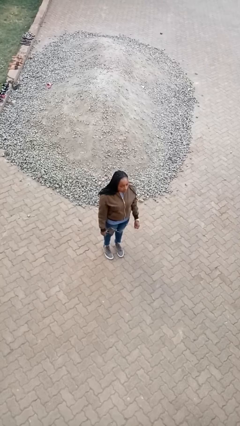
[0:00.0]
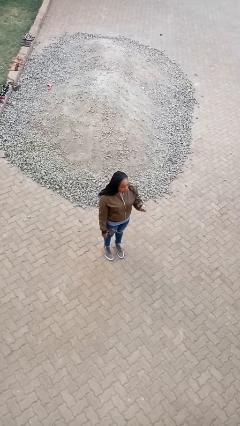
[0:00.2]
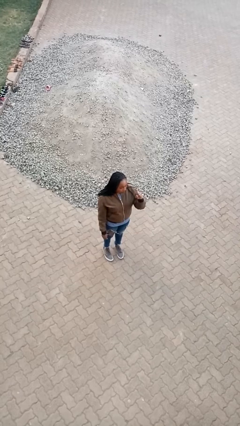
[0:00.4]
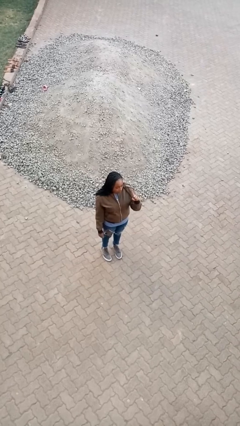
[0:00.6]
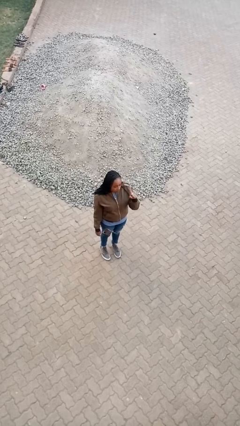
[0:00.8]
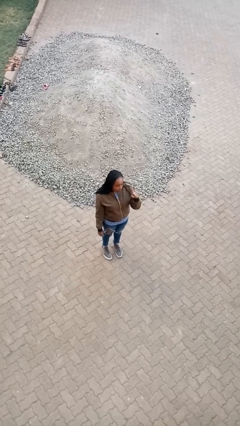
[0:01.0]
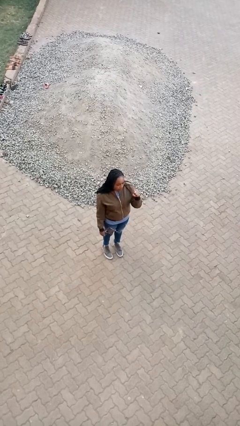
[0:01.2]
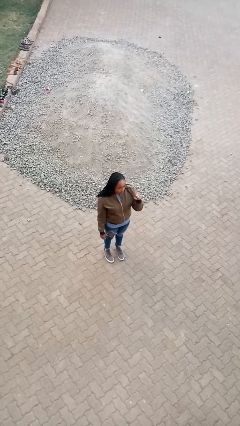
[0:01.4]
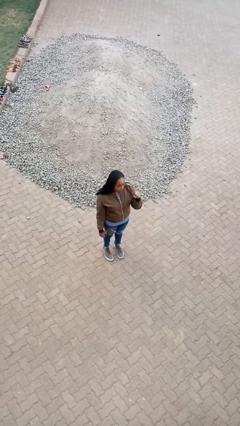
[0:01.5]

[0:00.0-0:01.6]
person gestures number one

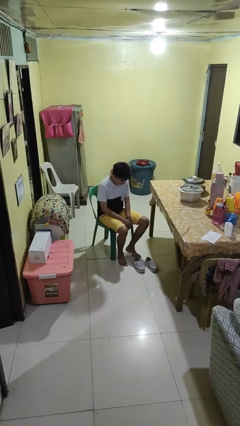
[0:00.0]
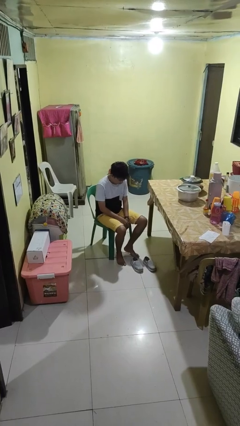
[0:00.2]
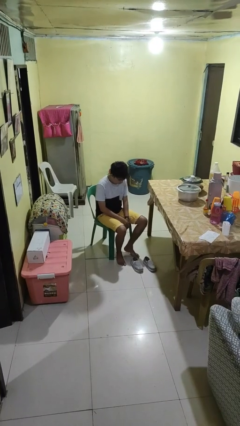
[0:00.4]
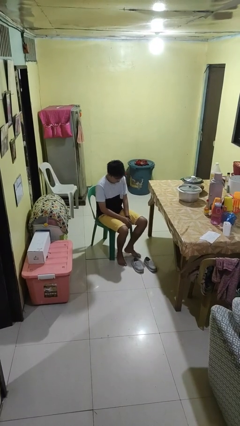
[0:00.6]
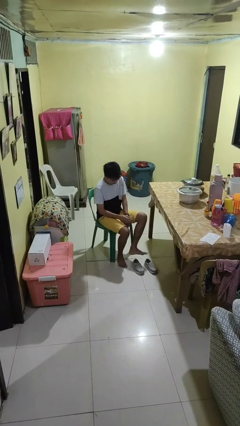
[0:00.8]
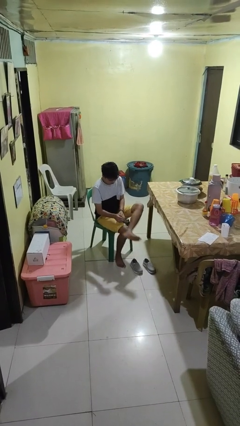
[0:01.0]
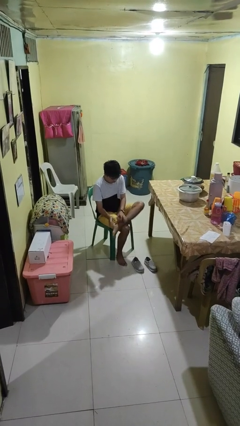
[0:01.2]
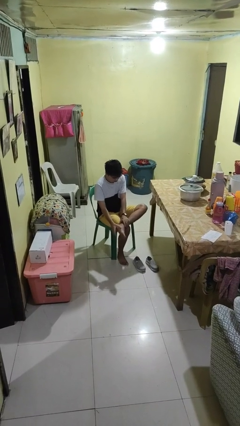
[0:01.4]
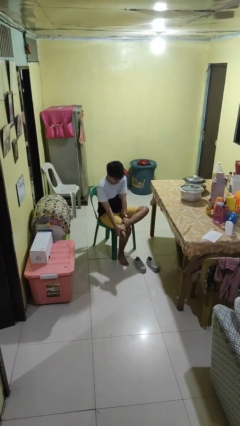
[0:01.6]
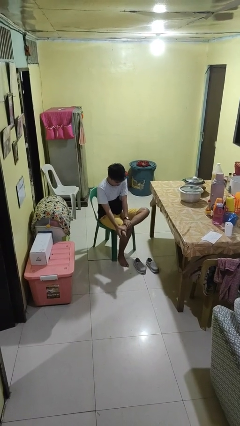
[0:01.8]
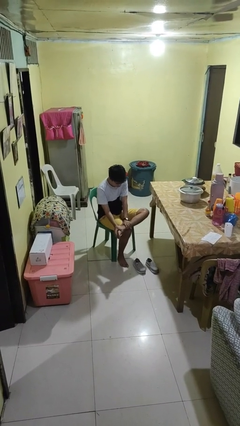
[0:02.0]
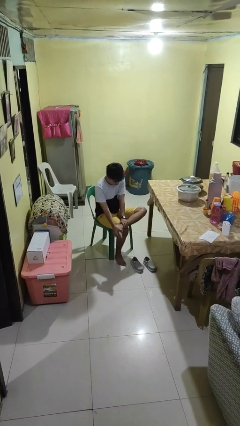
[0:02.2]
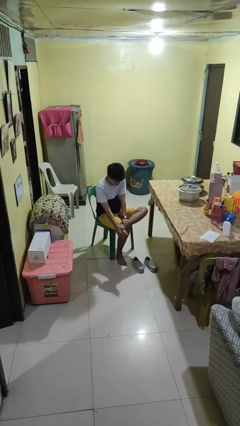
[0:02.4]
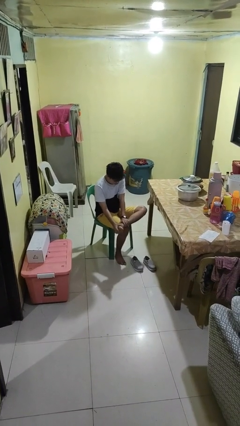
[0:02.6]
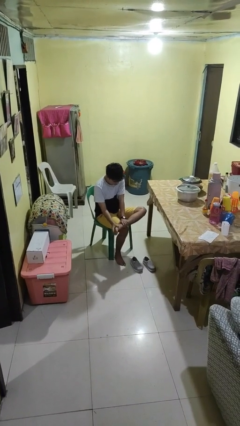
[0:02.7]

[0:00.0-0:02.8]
person rubs foot

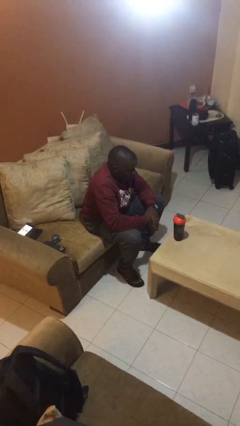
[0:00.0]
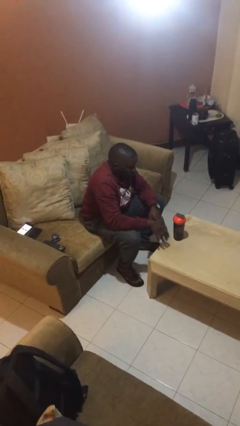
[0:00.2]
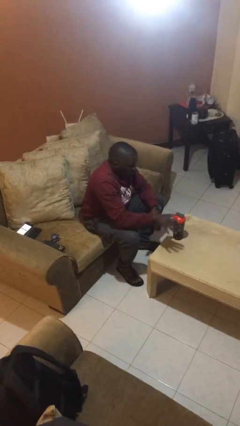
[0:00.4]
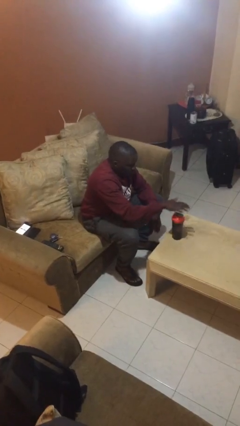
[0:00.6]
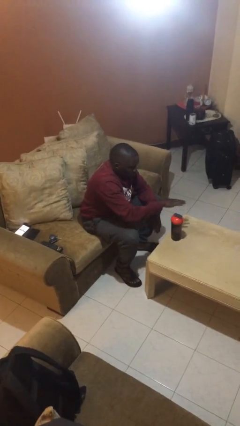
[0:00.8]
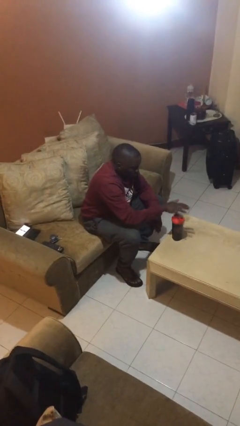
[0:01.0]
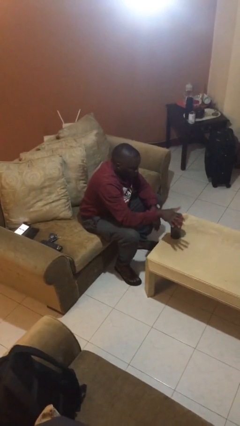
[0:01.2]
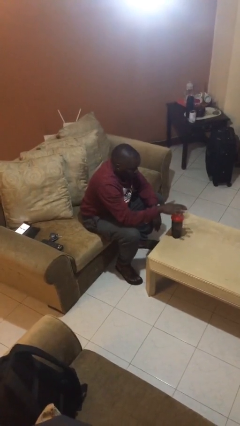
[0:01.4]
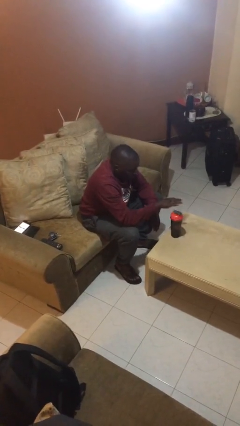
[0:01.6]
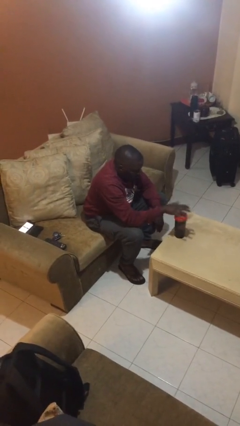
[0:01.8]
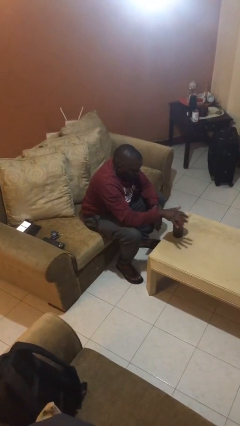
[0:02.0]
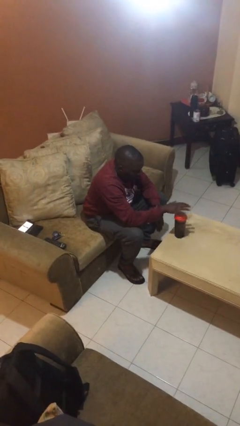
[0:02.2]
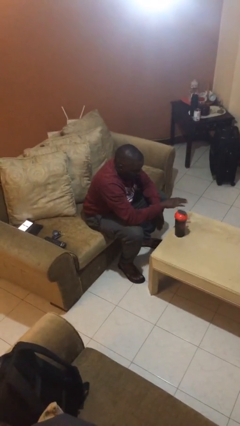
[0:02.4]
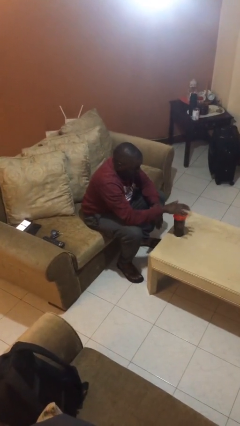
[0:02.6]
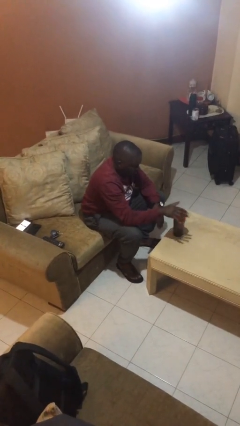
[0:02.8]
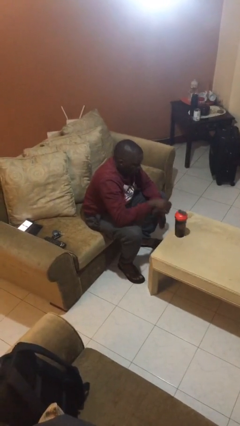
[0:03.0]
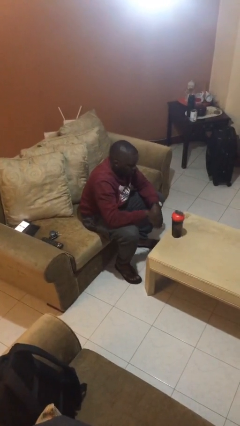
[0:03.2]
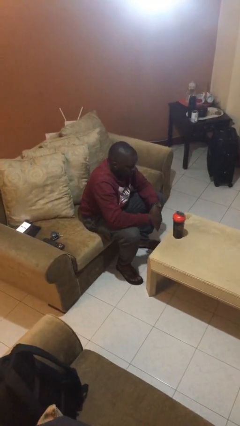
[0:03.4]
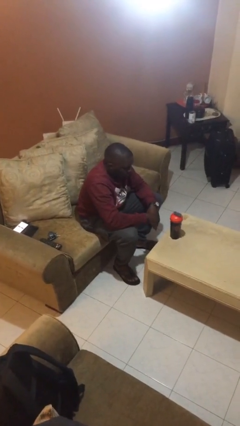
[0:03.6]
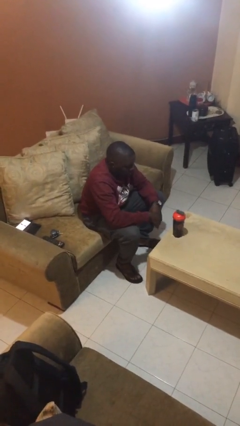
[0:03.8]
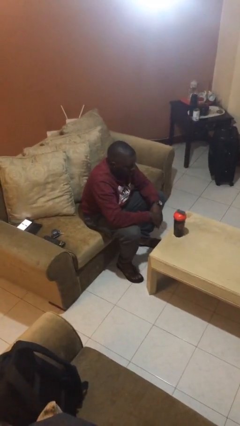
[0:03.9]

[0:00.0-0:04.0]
person waves hand over object

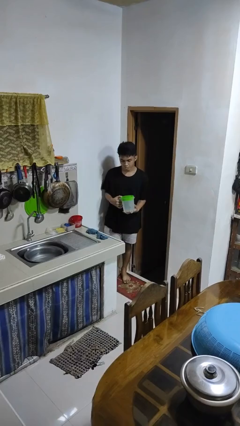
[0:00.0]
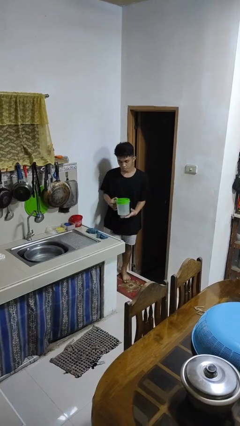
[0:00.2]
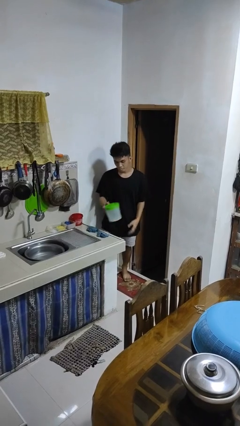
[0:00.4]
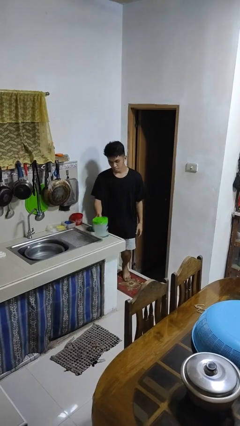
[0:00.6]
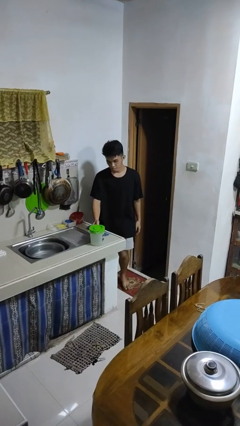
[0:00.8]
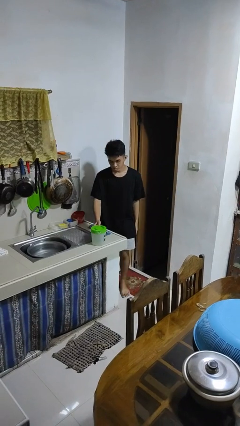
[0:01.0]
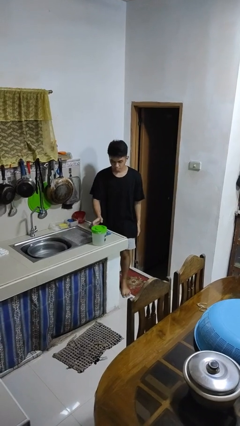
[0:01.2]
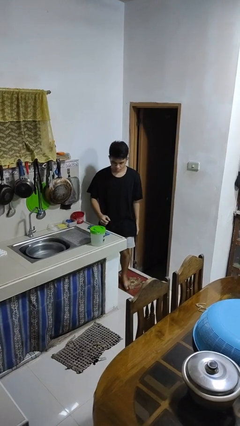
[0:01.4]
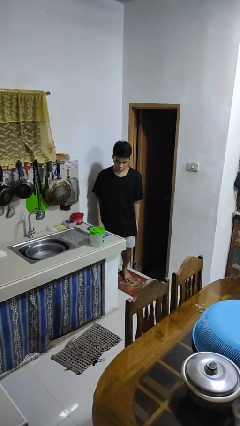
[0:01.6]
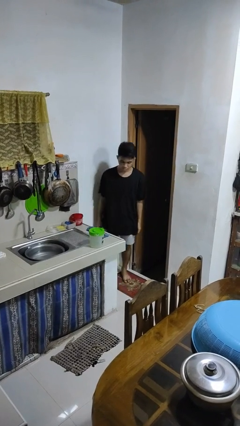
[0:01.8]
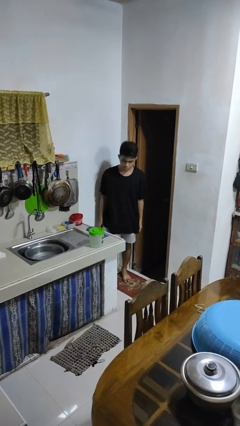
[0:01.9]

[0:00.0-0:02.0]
person puts down object on countertop

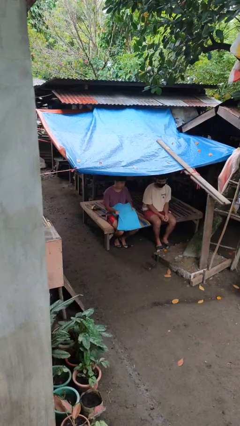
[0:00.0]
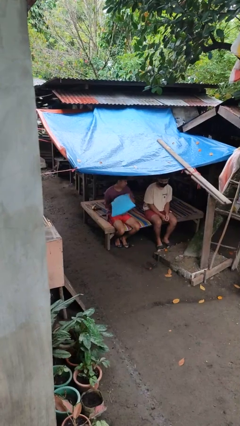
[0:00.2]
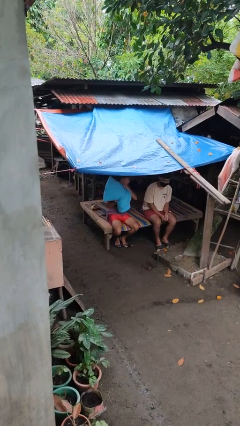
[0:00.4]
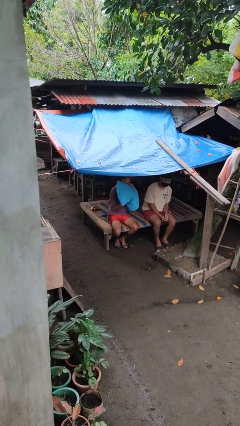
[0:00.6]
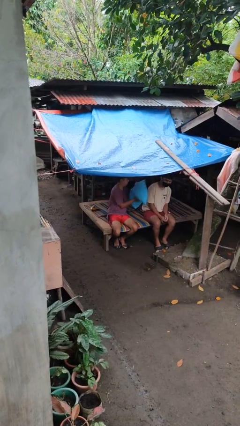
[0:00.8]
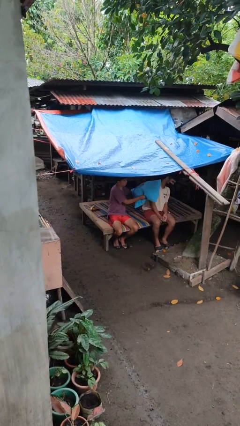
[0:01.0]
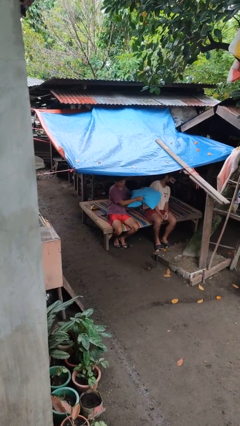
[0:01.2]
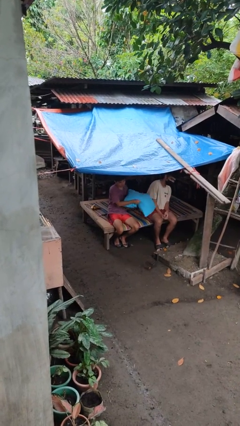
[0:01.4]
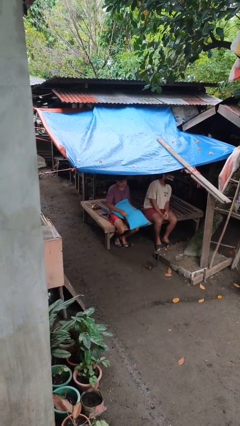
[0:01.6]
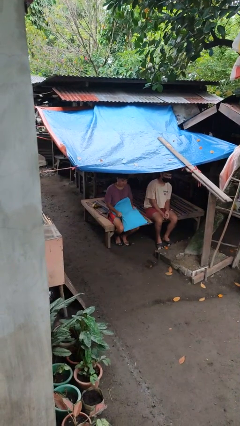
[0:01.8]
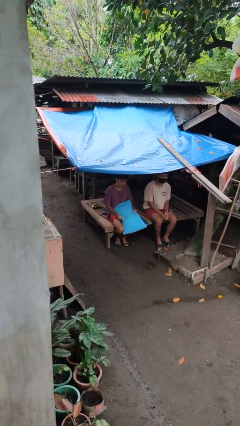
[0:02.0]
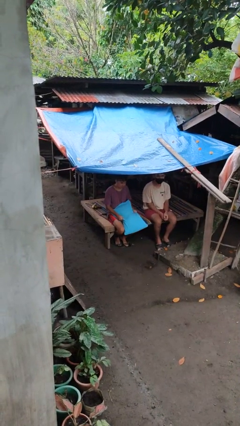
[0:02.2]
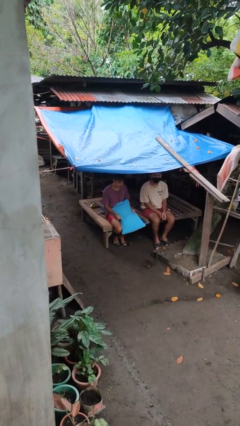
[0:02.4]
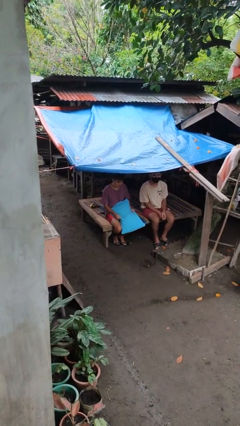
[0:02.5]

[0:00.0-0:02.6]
person hits person with pillow

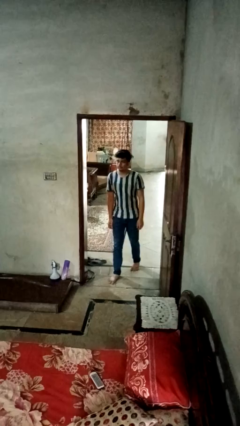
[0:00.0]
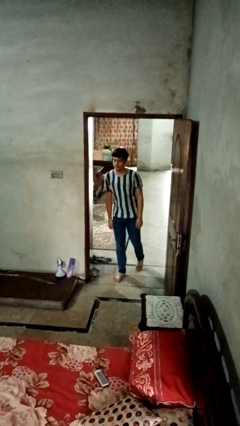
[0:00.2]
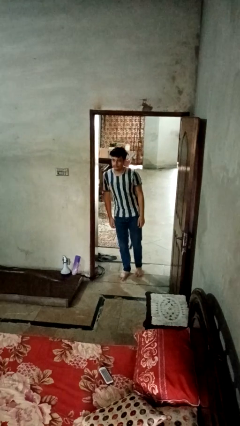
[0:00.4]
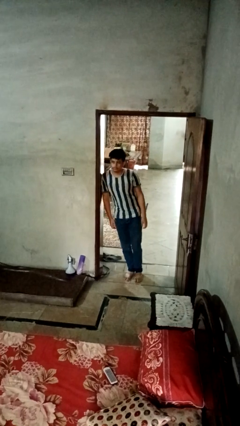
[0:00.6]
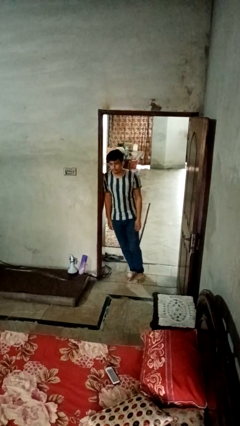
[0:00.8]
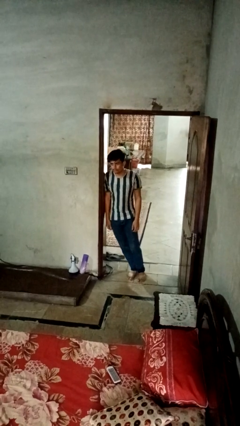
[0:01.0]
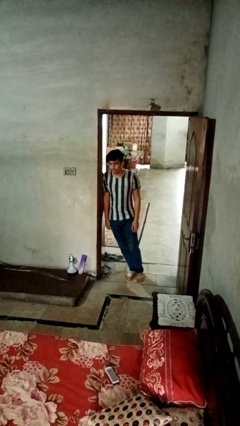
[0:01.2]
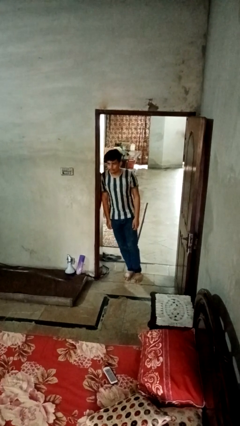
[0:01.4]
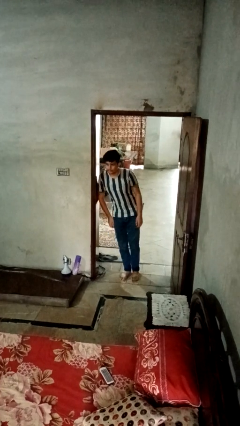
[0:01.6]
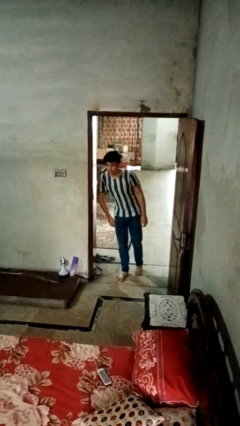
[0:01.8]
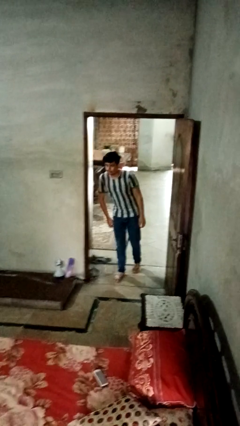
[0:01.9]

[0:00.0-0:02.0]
person bumps into wall

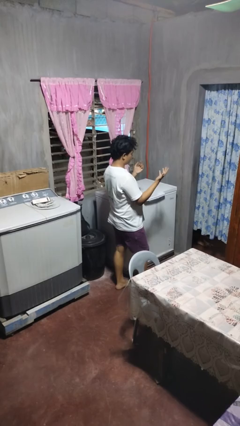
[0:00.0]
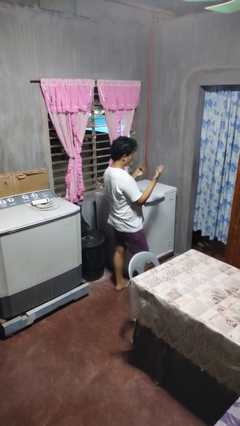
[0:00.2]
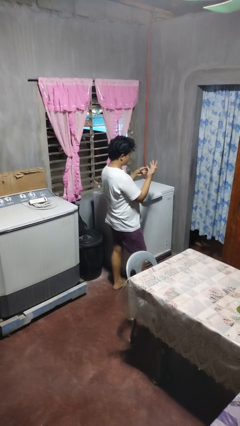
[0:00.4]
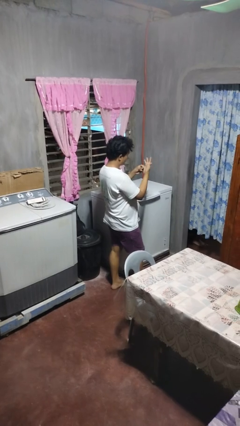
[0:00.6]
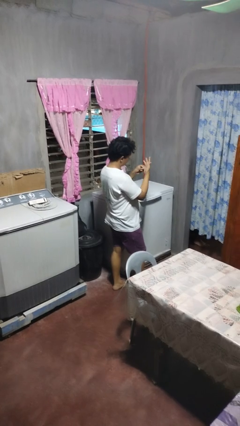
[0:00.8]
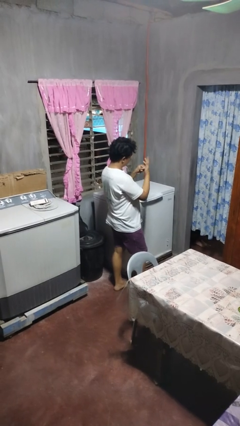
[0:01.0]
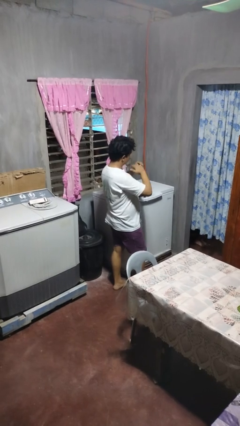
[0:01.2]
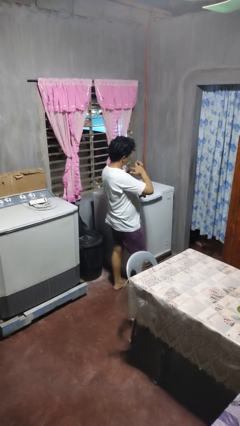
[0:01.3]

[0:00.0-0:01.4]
person takes off ring

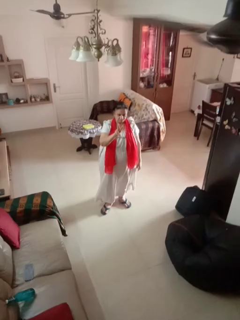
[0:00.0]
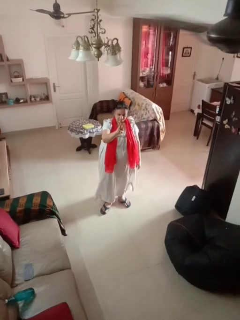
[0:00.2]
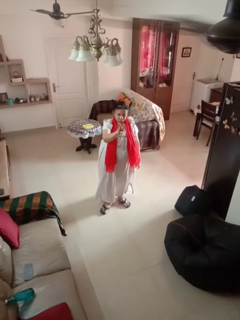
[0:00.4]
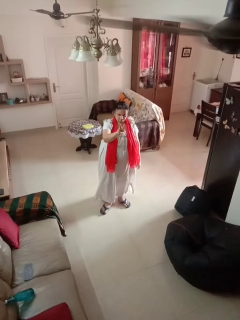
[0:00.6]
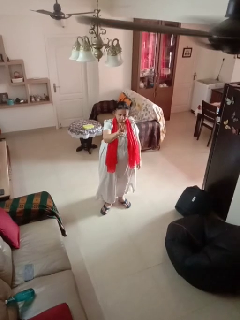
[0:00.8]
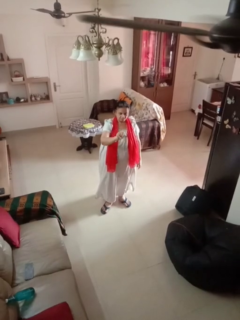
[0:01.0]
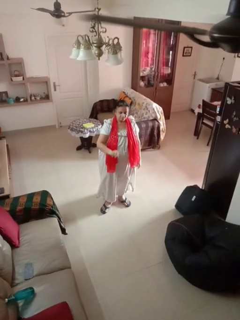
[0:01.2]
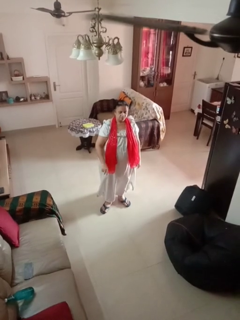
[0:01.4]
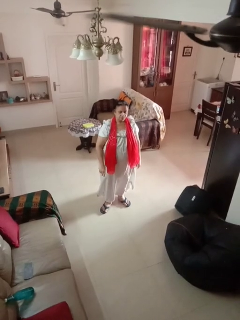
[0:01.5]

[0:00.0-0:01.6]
person gestures peace
